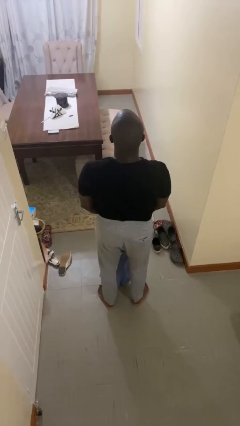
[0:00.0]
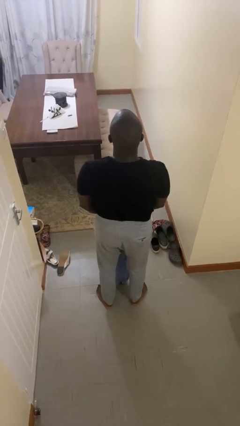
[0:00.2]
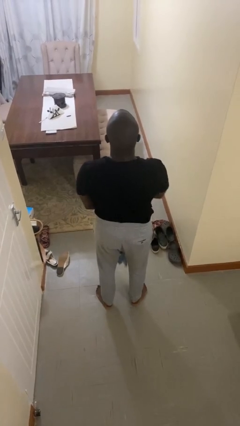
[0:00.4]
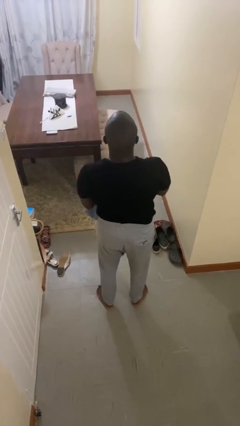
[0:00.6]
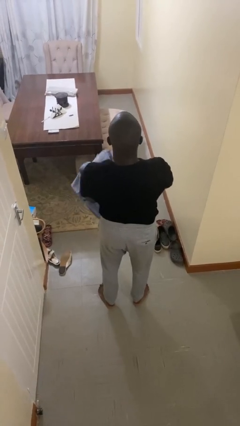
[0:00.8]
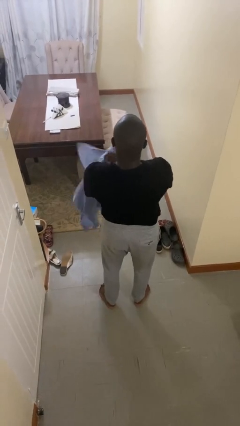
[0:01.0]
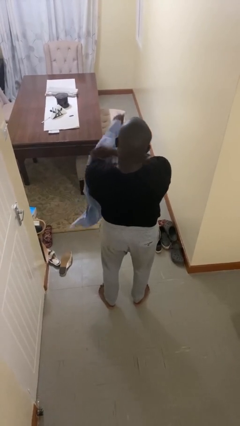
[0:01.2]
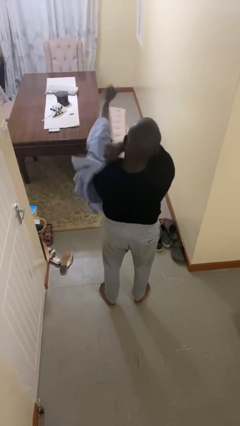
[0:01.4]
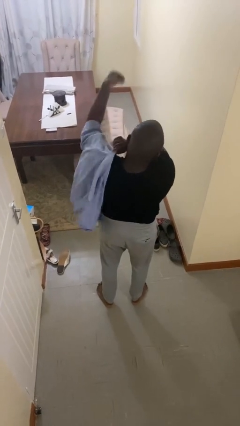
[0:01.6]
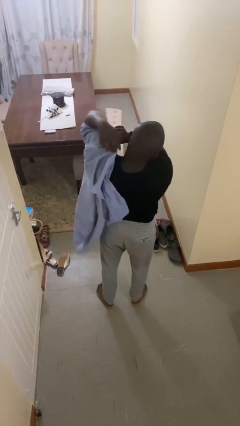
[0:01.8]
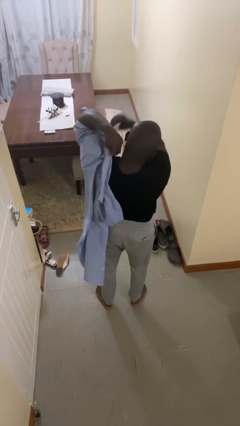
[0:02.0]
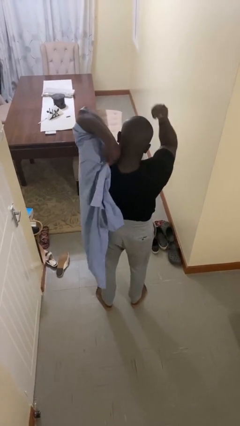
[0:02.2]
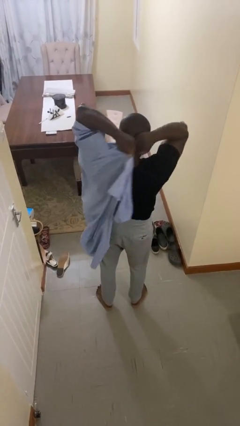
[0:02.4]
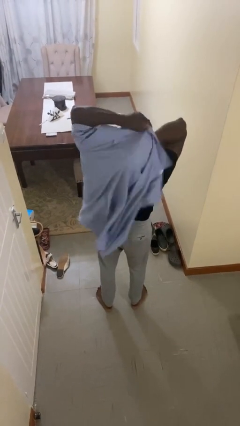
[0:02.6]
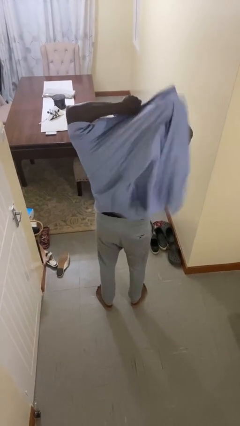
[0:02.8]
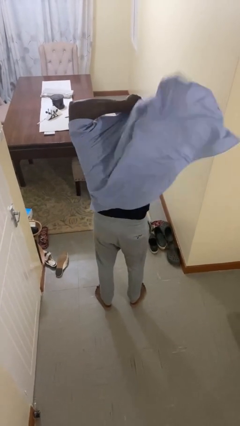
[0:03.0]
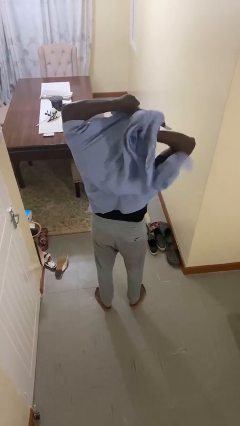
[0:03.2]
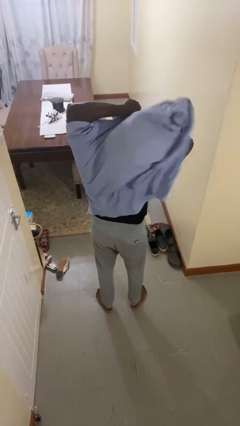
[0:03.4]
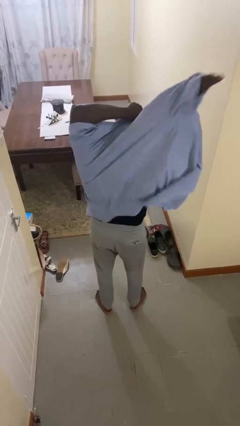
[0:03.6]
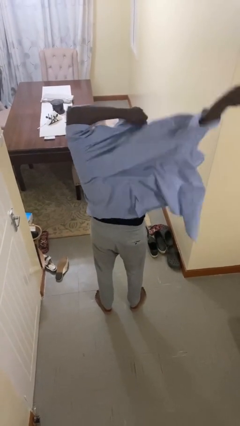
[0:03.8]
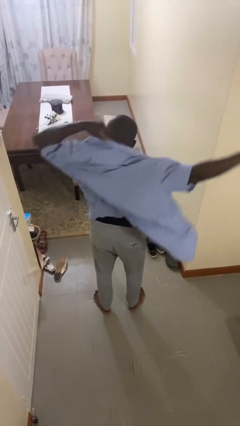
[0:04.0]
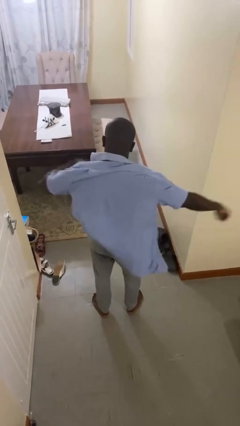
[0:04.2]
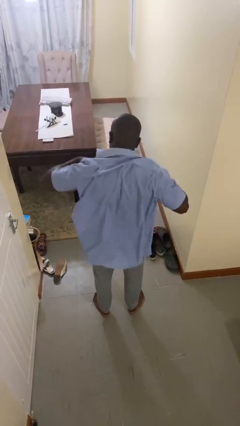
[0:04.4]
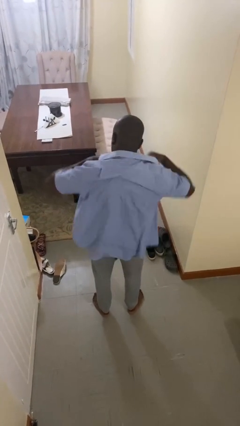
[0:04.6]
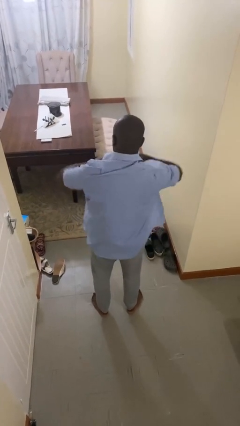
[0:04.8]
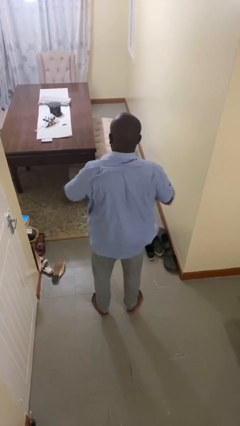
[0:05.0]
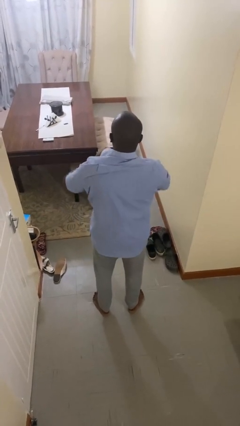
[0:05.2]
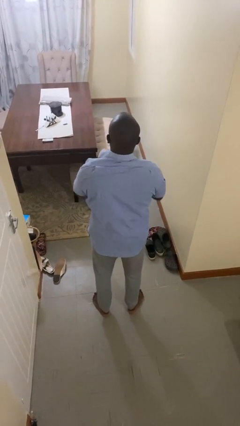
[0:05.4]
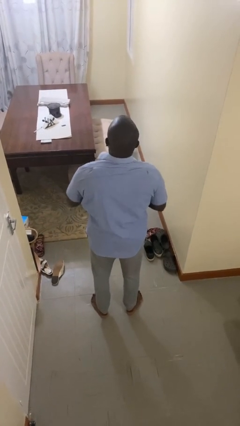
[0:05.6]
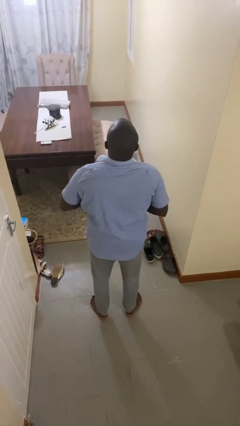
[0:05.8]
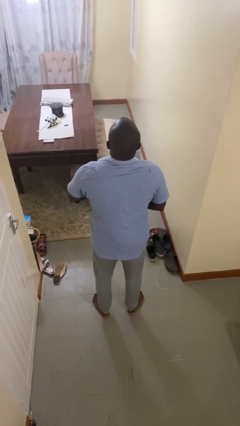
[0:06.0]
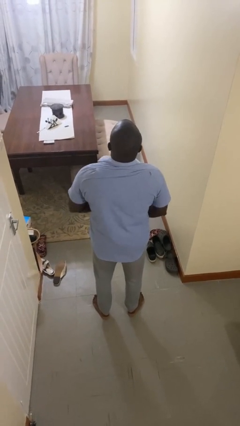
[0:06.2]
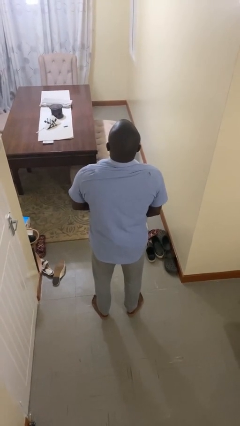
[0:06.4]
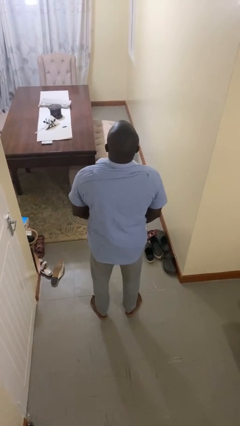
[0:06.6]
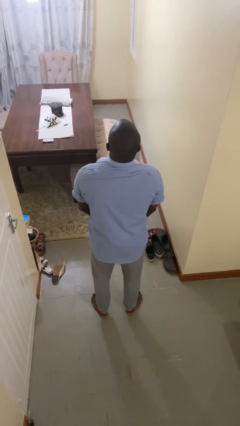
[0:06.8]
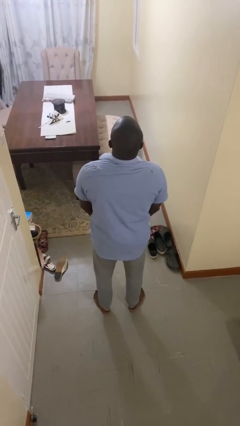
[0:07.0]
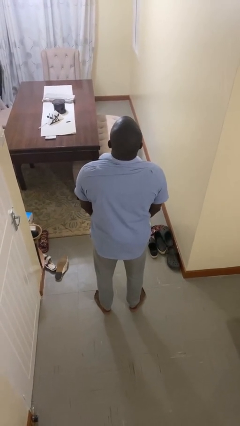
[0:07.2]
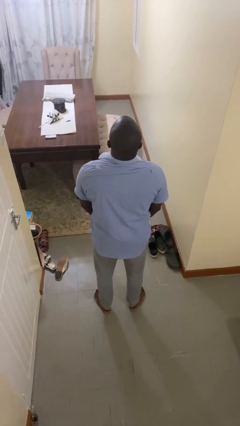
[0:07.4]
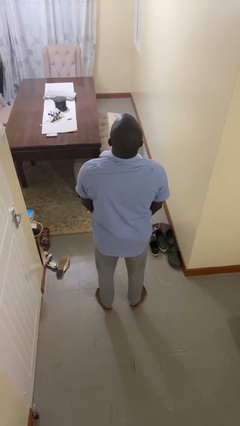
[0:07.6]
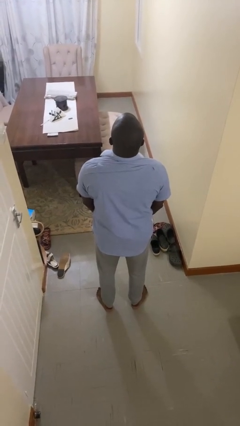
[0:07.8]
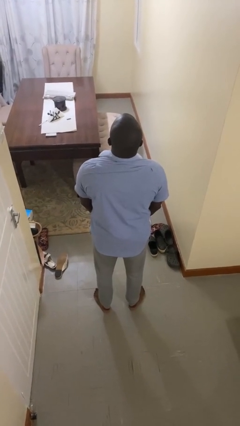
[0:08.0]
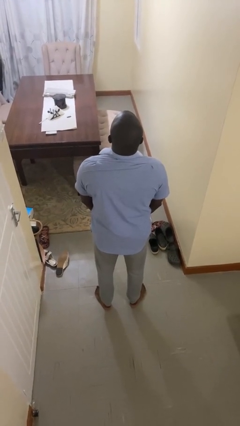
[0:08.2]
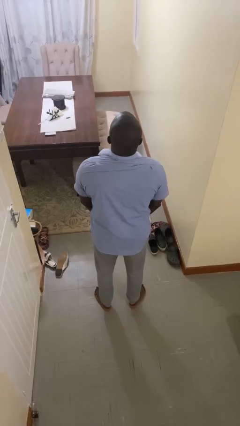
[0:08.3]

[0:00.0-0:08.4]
person puts on shirt

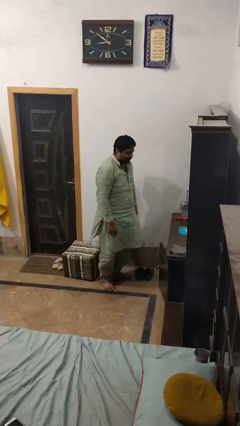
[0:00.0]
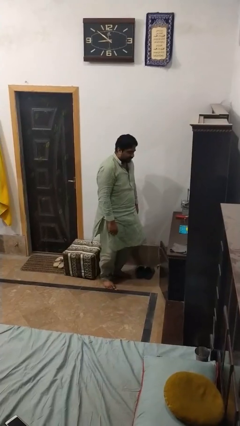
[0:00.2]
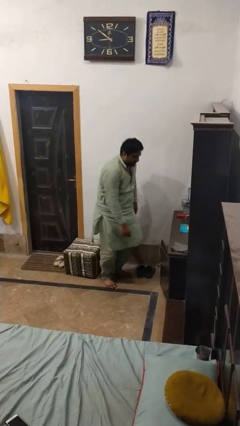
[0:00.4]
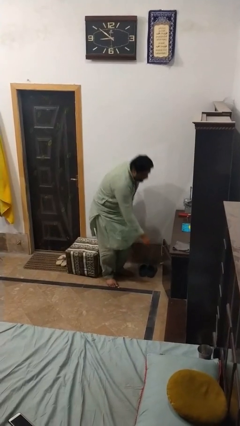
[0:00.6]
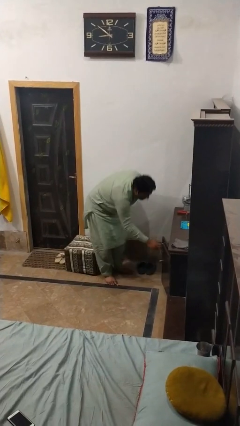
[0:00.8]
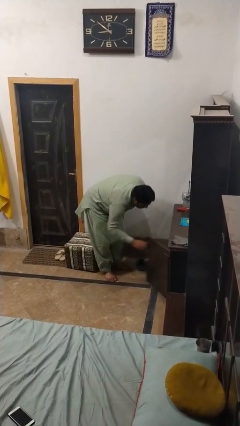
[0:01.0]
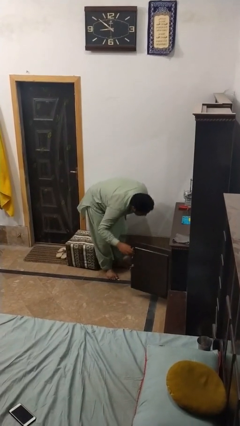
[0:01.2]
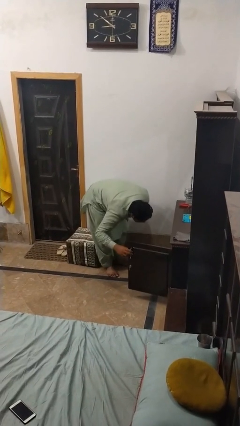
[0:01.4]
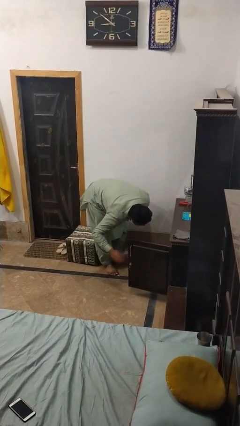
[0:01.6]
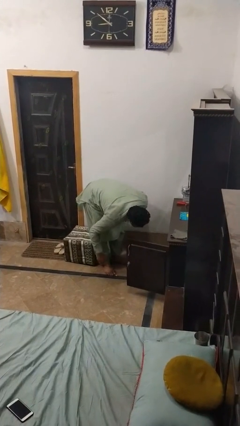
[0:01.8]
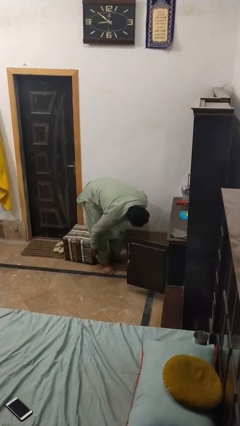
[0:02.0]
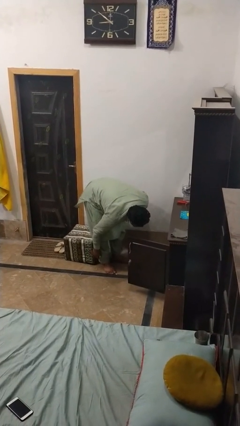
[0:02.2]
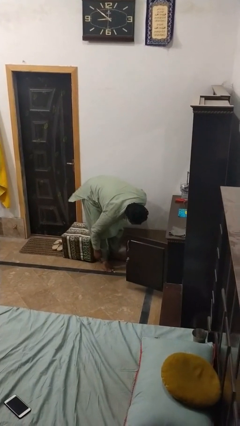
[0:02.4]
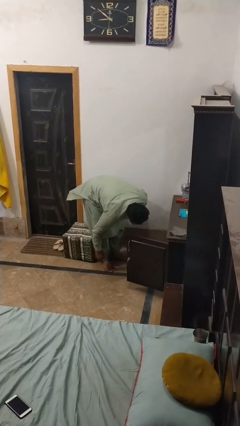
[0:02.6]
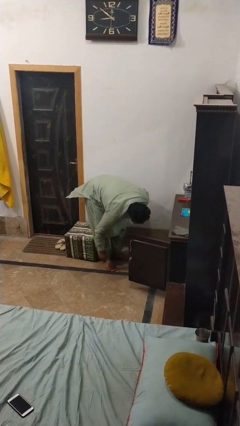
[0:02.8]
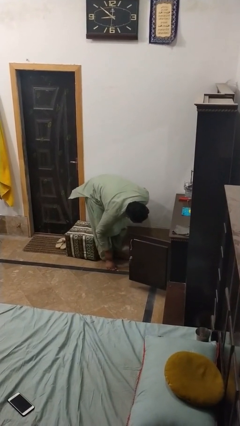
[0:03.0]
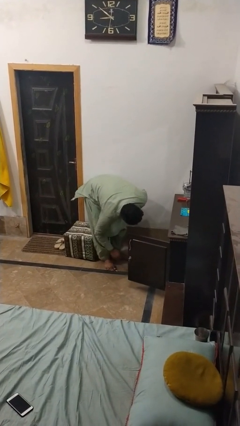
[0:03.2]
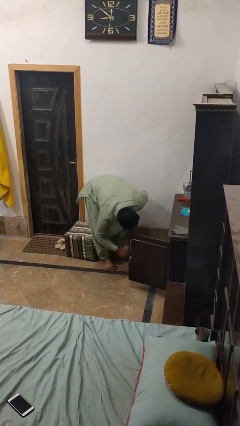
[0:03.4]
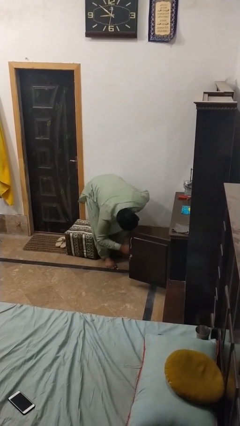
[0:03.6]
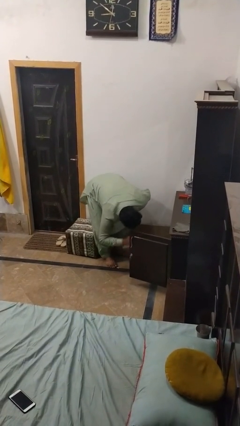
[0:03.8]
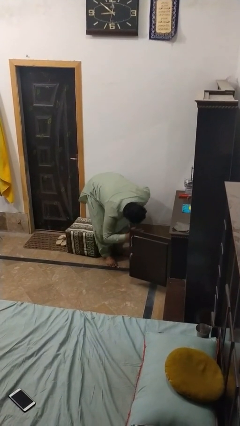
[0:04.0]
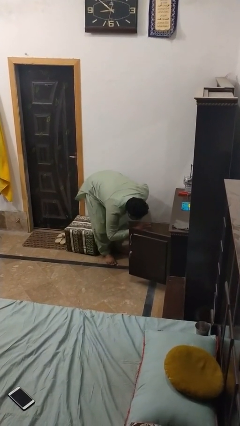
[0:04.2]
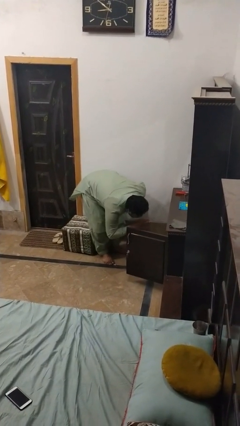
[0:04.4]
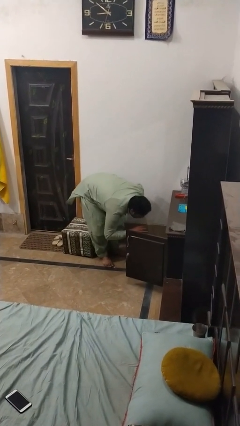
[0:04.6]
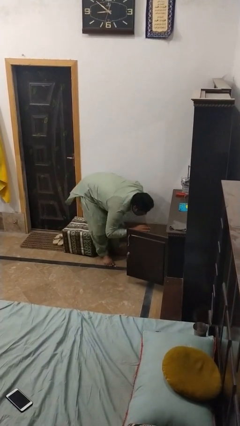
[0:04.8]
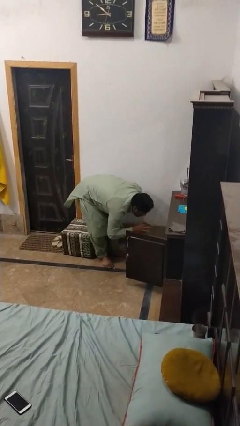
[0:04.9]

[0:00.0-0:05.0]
person searches in cabinet

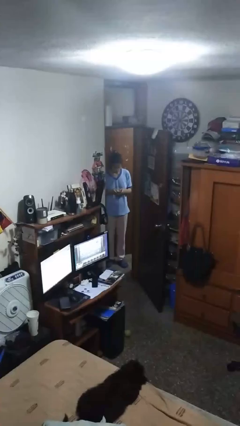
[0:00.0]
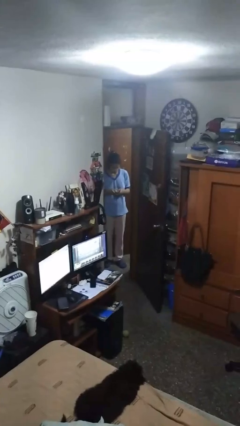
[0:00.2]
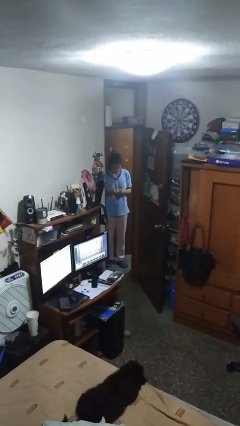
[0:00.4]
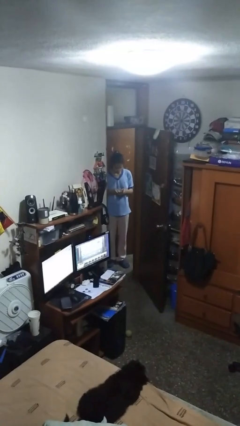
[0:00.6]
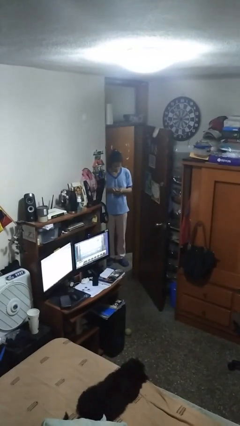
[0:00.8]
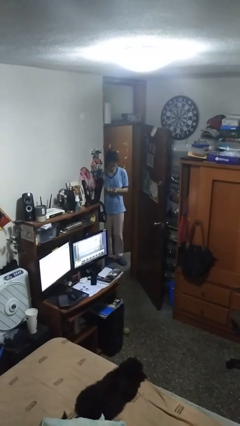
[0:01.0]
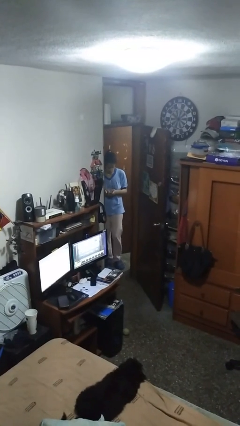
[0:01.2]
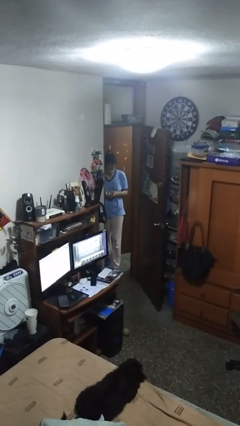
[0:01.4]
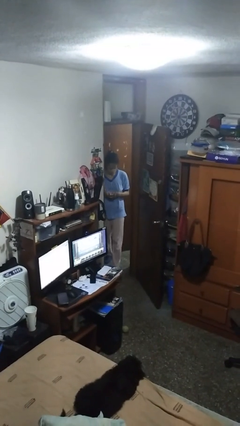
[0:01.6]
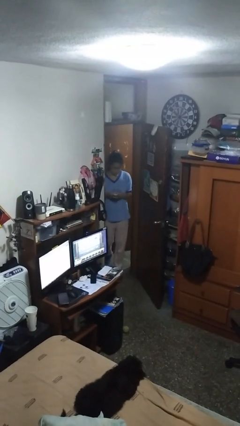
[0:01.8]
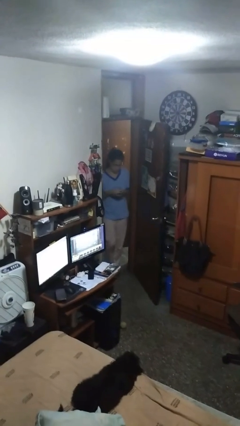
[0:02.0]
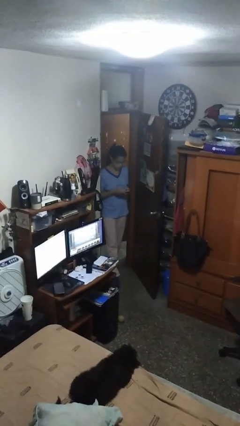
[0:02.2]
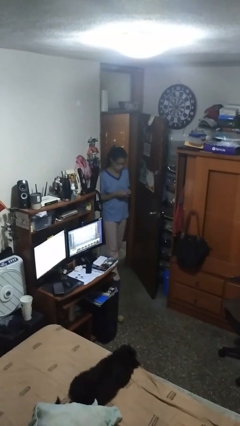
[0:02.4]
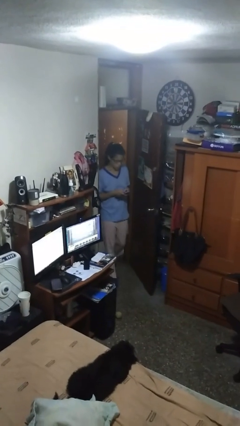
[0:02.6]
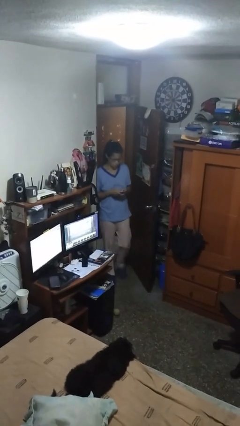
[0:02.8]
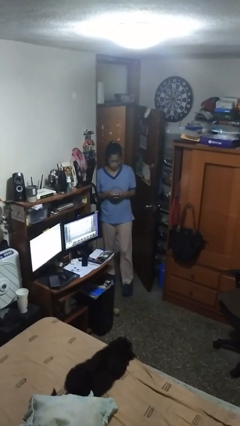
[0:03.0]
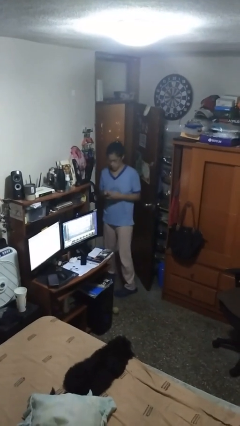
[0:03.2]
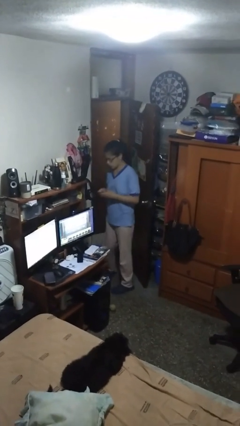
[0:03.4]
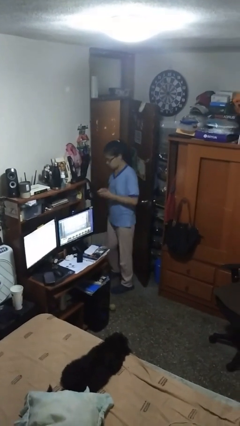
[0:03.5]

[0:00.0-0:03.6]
person enters scene through structure

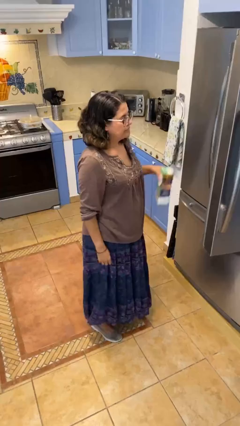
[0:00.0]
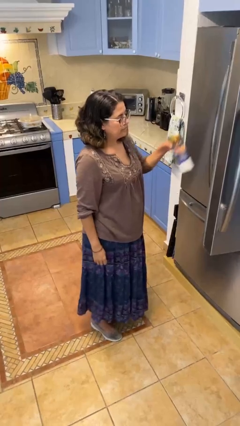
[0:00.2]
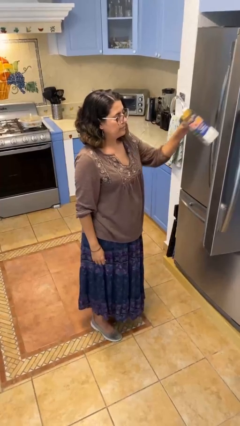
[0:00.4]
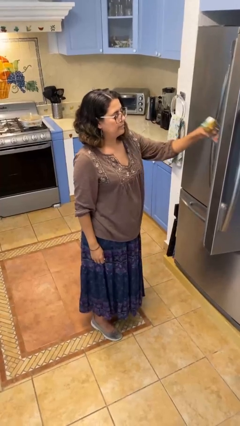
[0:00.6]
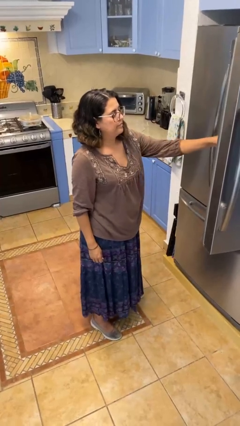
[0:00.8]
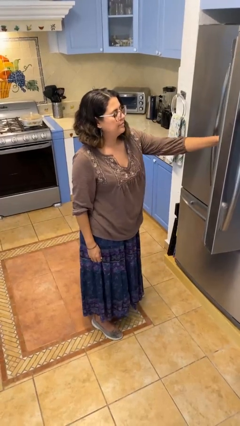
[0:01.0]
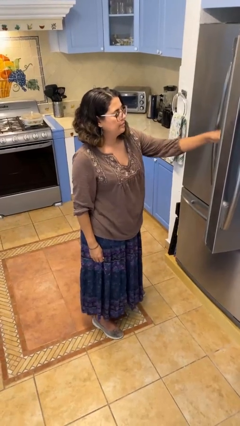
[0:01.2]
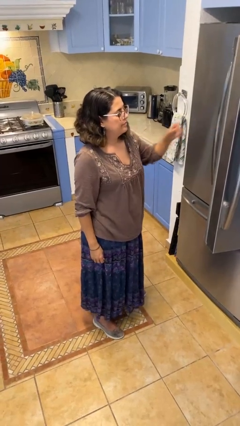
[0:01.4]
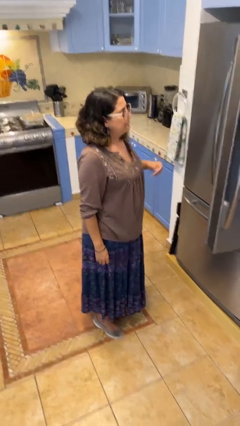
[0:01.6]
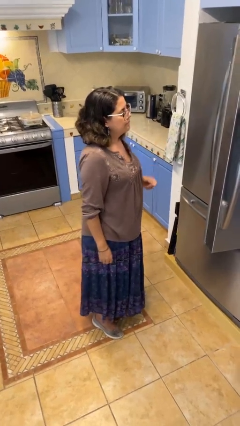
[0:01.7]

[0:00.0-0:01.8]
person puts object into refrigerator
